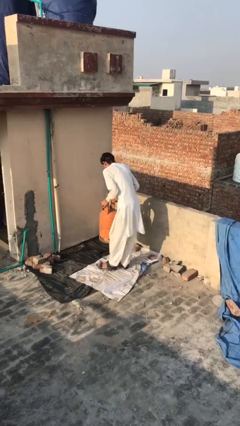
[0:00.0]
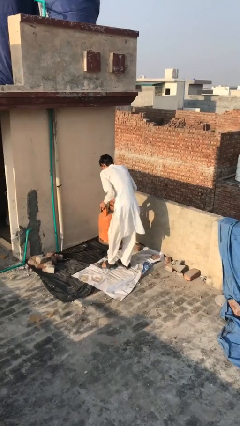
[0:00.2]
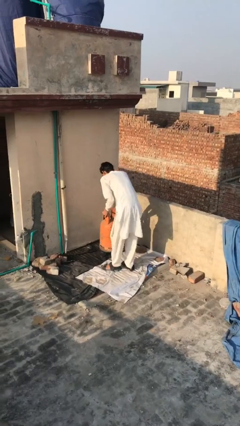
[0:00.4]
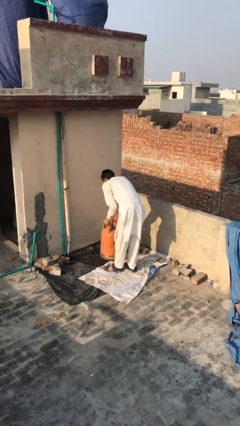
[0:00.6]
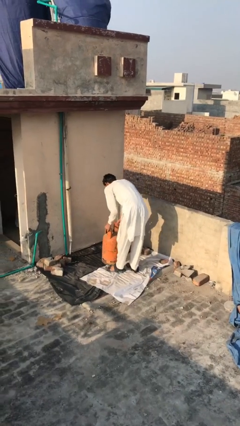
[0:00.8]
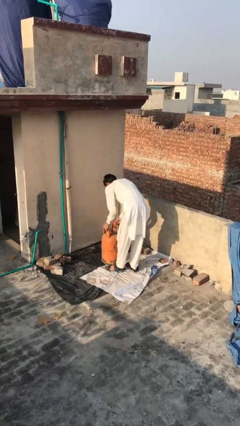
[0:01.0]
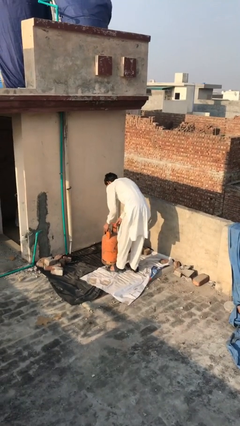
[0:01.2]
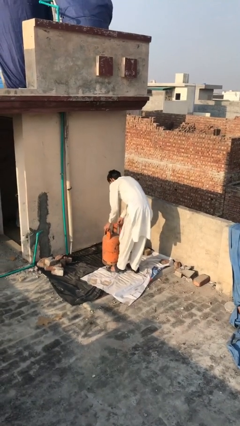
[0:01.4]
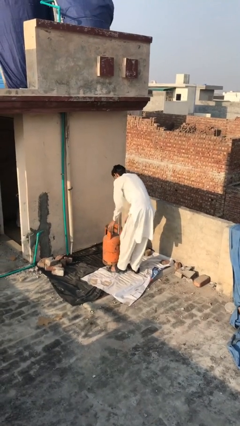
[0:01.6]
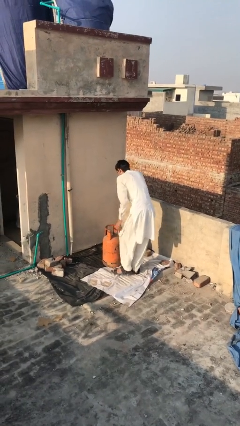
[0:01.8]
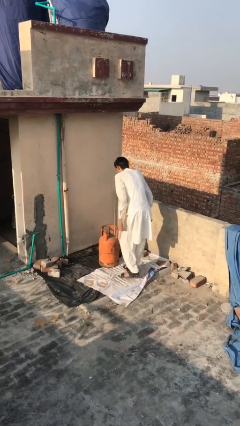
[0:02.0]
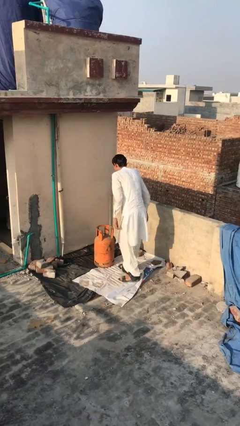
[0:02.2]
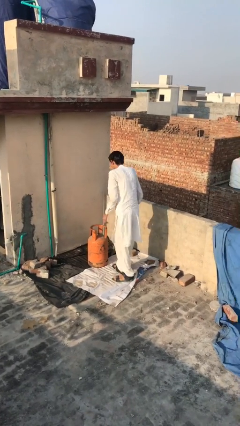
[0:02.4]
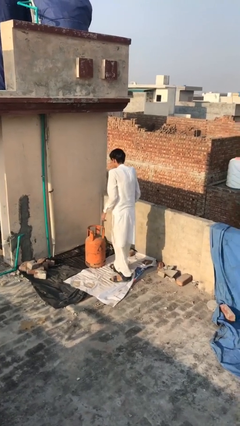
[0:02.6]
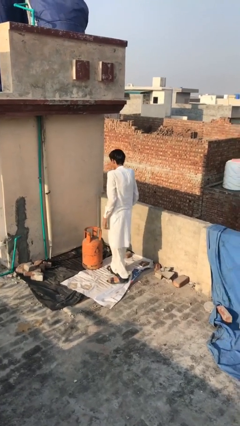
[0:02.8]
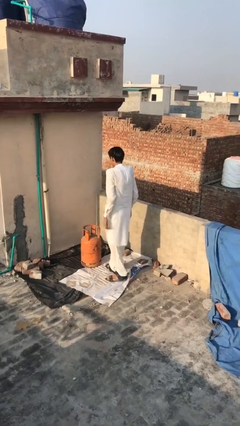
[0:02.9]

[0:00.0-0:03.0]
person puts down object on floor

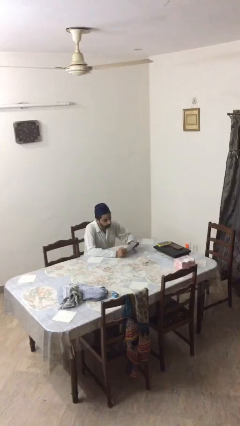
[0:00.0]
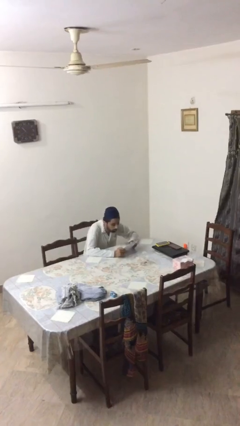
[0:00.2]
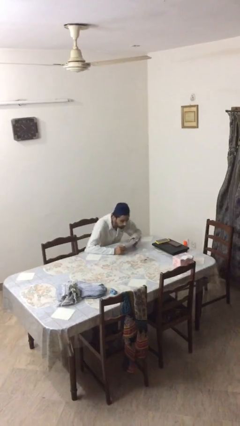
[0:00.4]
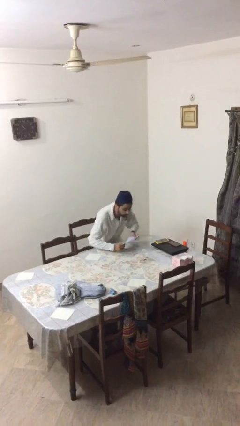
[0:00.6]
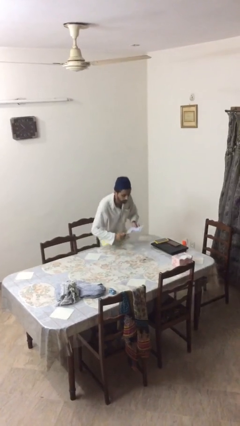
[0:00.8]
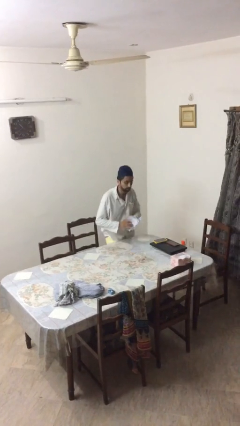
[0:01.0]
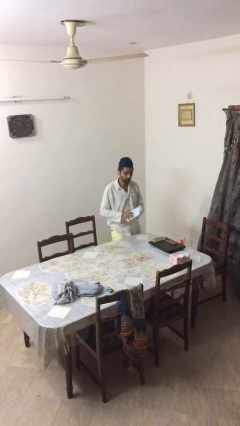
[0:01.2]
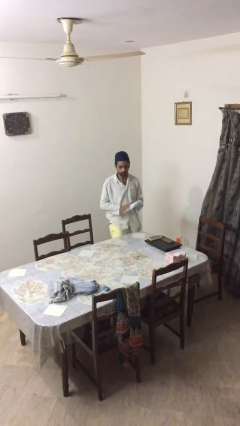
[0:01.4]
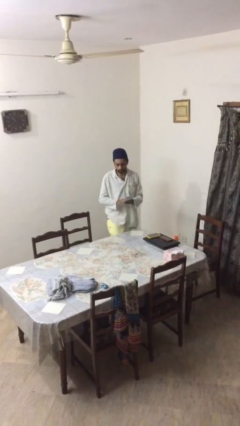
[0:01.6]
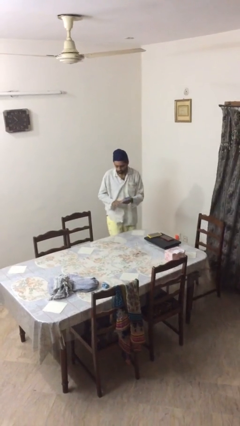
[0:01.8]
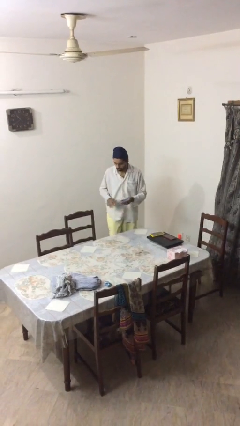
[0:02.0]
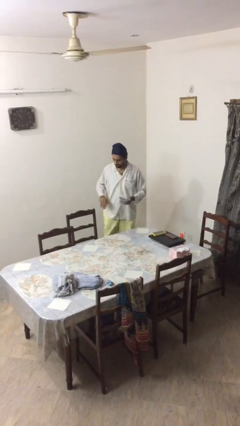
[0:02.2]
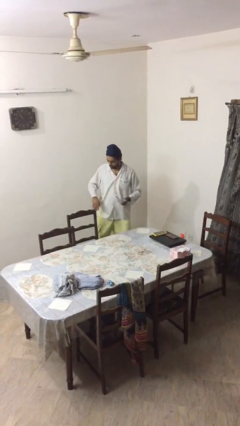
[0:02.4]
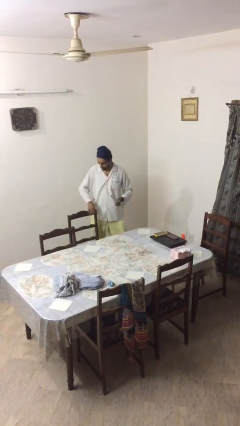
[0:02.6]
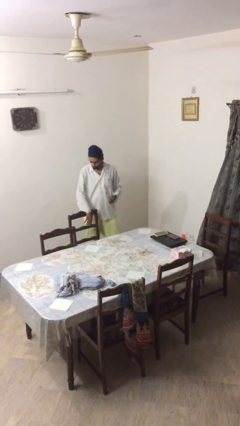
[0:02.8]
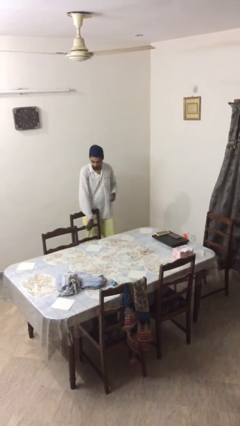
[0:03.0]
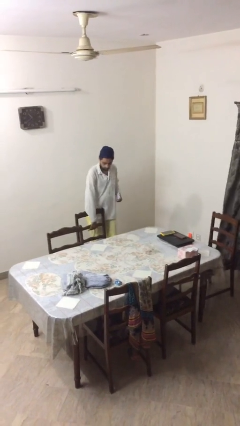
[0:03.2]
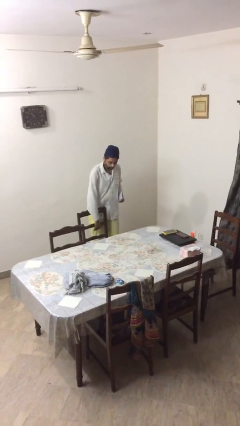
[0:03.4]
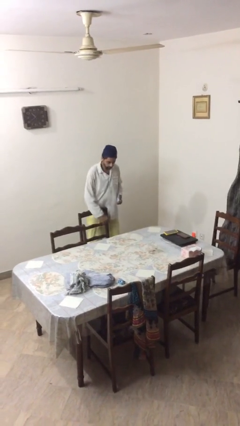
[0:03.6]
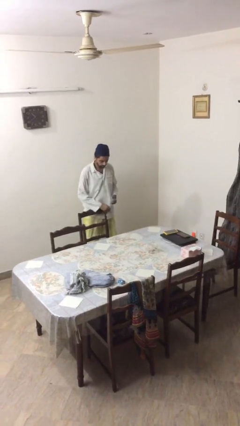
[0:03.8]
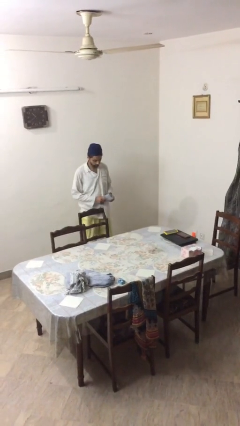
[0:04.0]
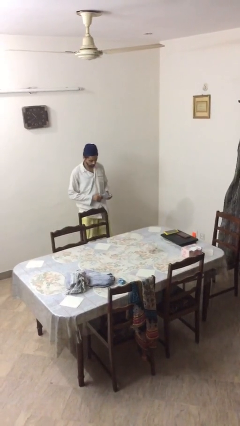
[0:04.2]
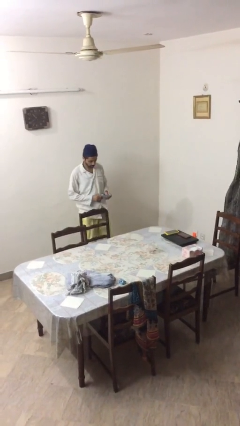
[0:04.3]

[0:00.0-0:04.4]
person stands up

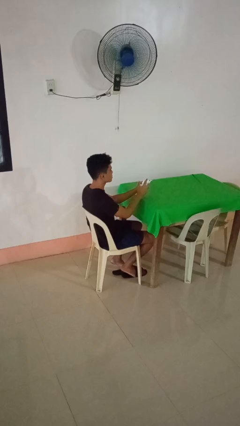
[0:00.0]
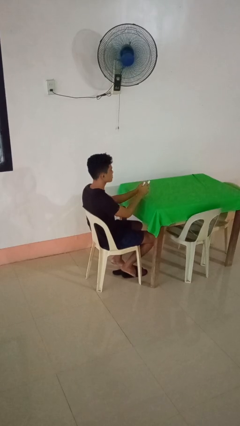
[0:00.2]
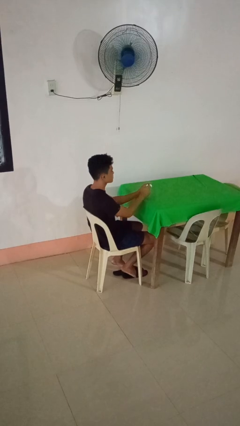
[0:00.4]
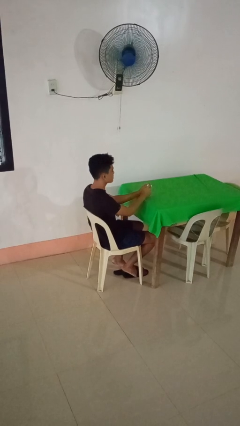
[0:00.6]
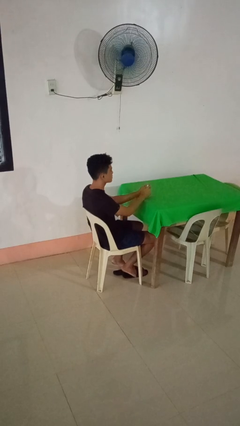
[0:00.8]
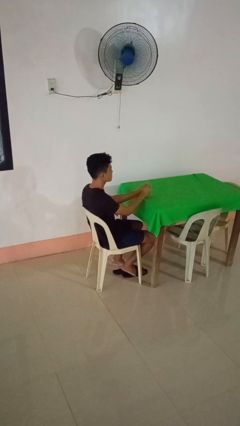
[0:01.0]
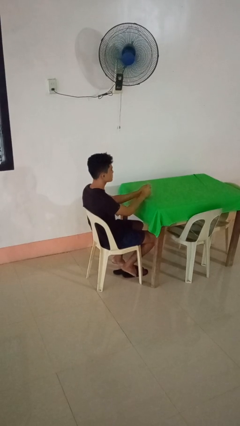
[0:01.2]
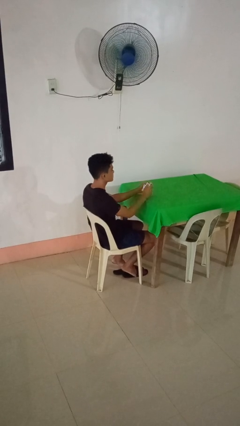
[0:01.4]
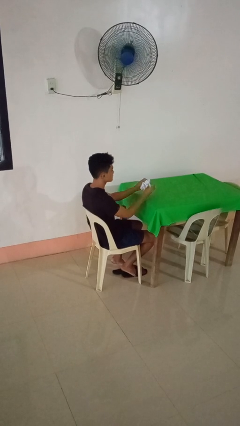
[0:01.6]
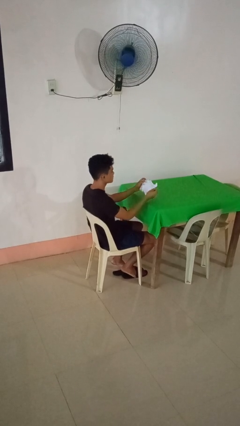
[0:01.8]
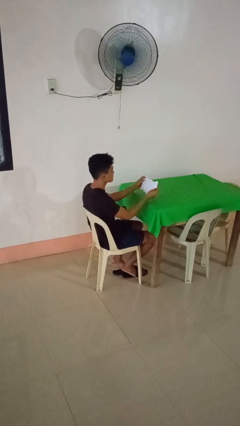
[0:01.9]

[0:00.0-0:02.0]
person crumples paper

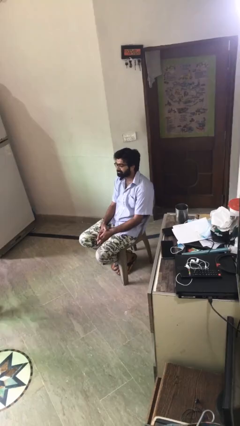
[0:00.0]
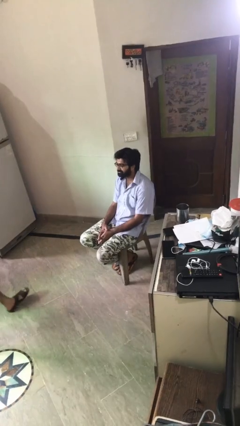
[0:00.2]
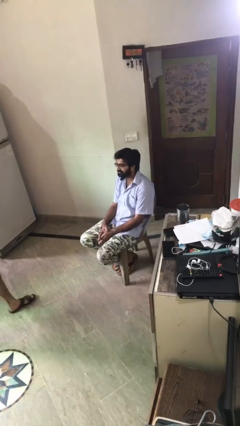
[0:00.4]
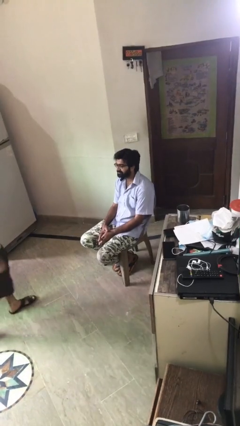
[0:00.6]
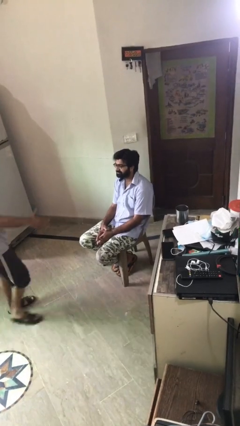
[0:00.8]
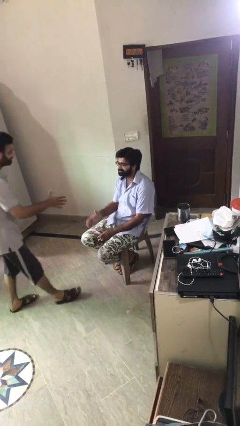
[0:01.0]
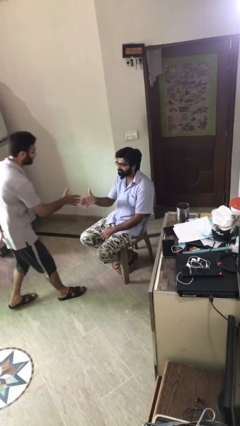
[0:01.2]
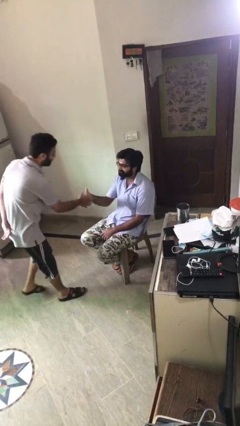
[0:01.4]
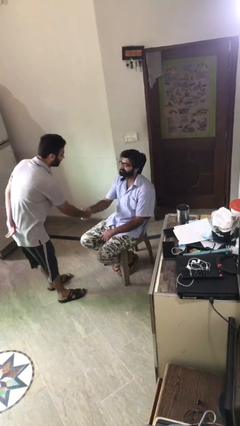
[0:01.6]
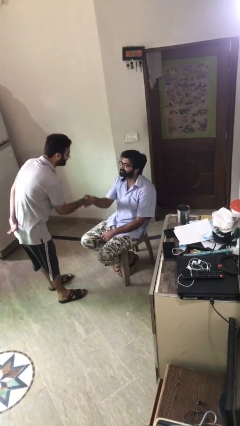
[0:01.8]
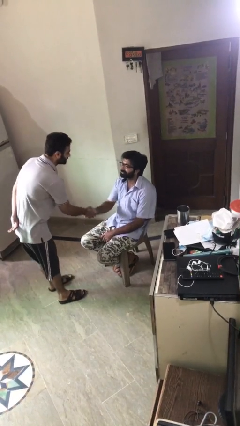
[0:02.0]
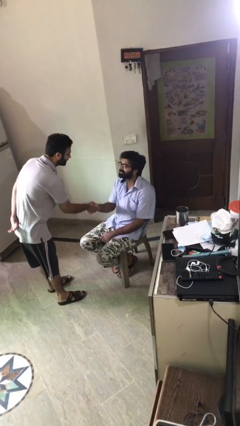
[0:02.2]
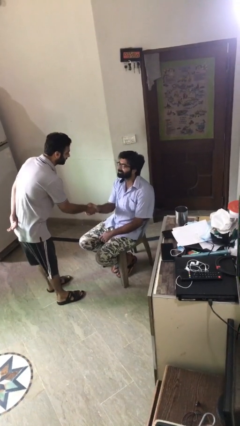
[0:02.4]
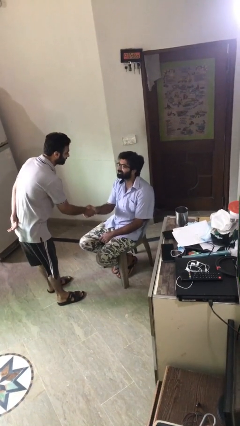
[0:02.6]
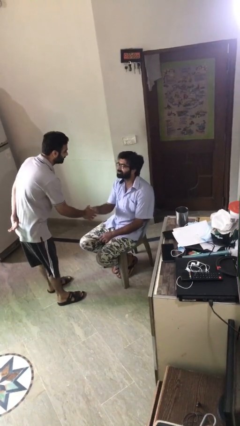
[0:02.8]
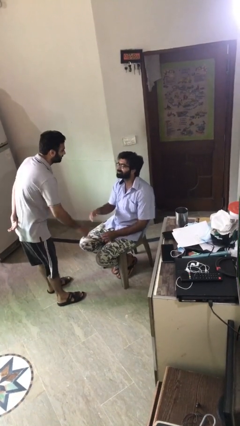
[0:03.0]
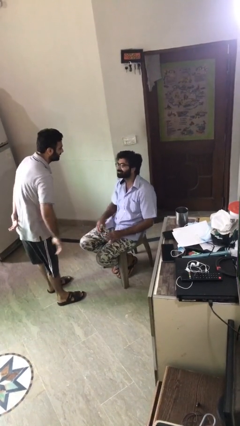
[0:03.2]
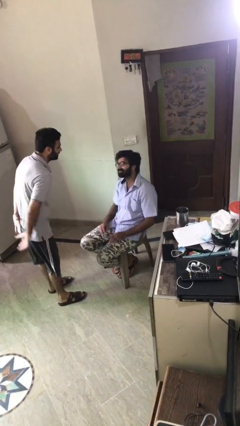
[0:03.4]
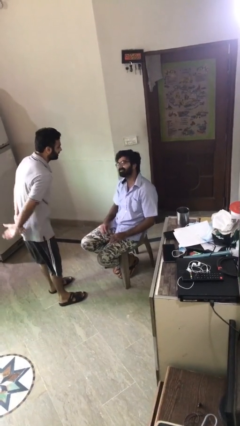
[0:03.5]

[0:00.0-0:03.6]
person shakes hand

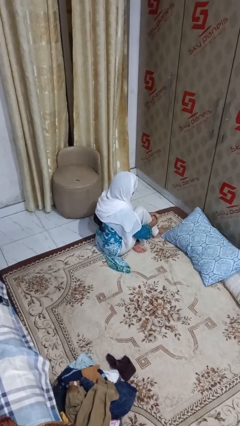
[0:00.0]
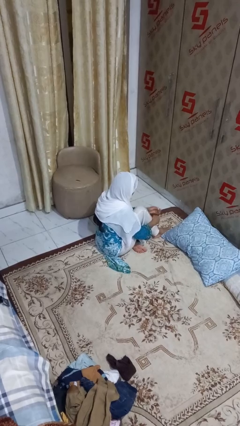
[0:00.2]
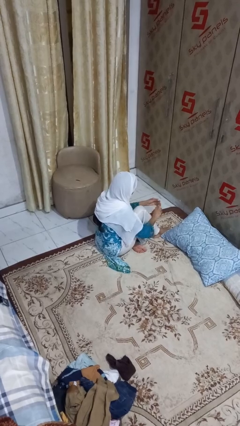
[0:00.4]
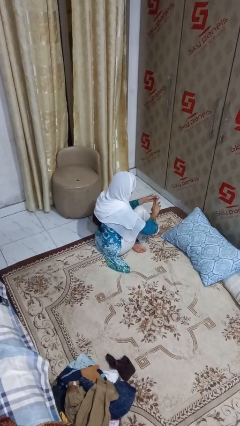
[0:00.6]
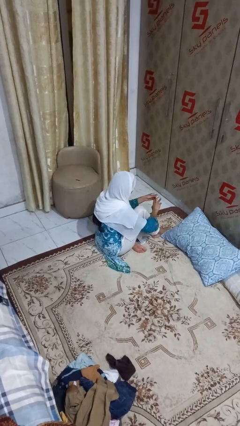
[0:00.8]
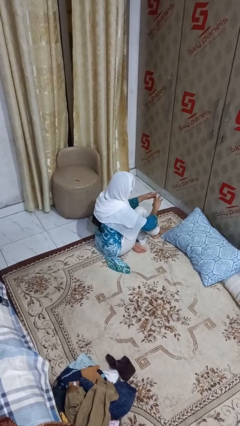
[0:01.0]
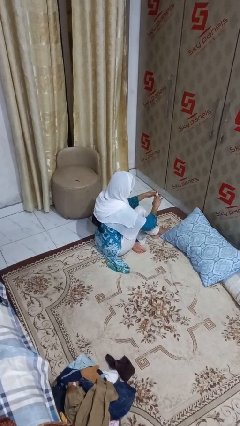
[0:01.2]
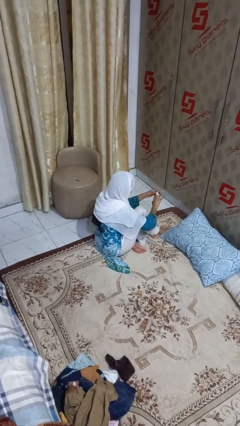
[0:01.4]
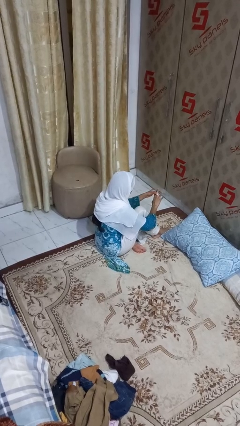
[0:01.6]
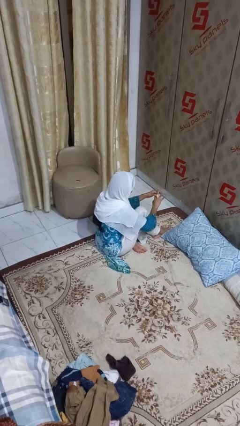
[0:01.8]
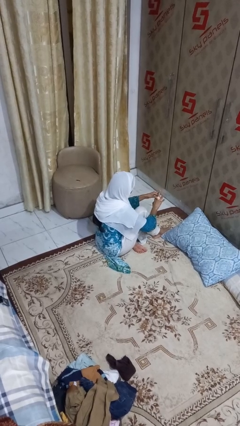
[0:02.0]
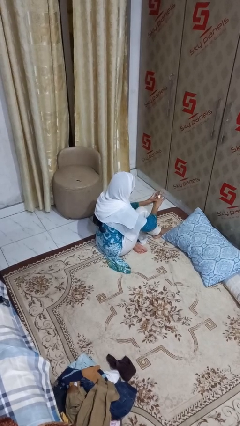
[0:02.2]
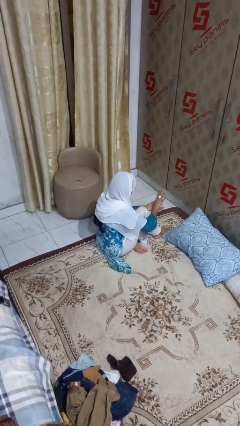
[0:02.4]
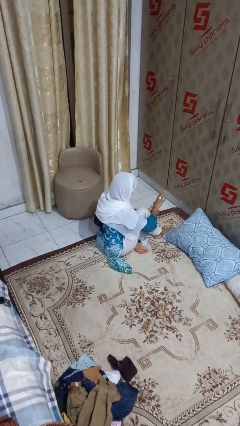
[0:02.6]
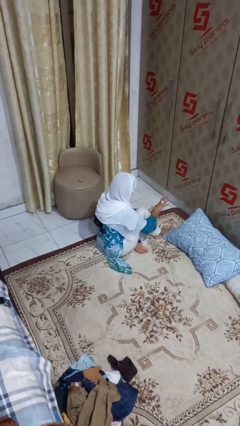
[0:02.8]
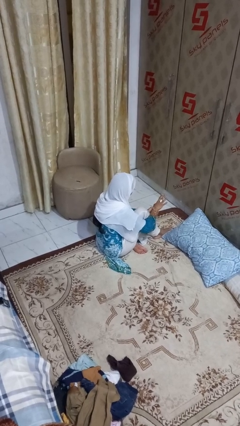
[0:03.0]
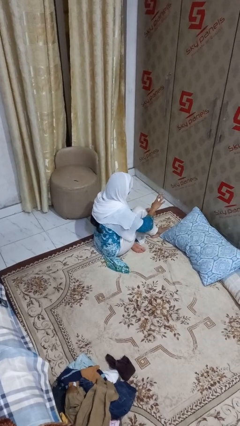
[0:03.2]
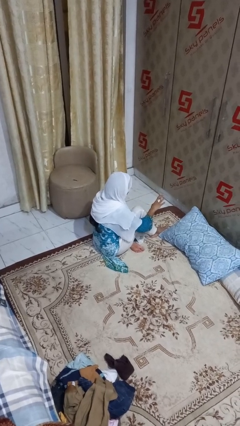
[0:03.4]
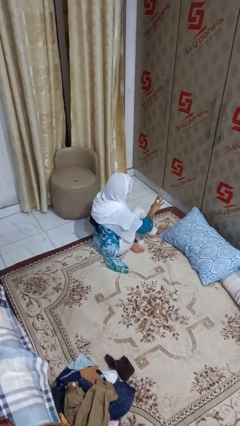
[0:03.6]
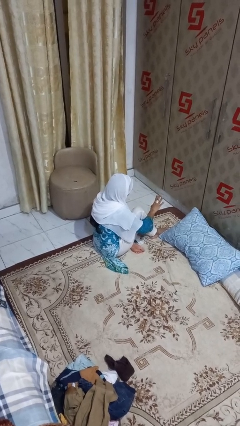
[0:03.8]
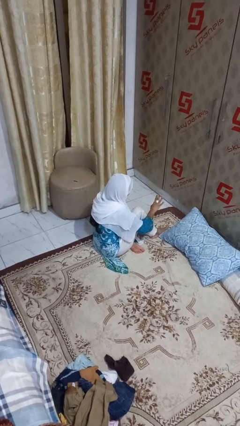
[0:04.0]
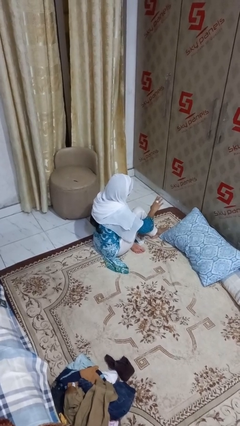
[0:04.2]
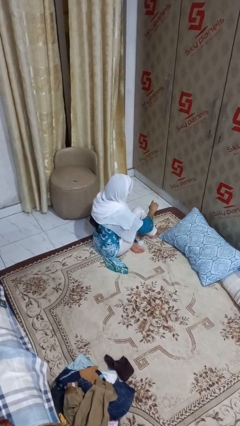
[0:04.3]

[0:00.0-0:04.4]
person puts on ring

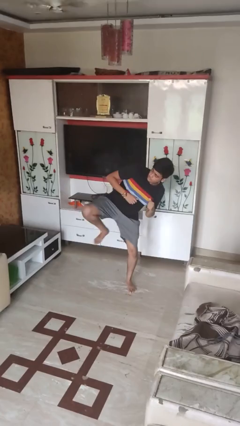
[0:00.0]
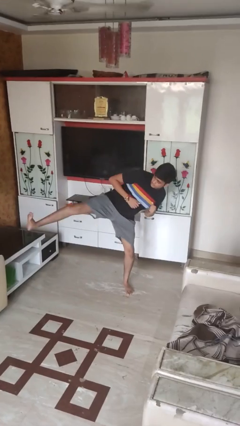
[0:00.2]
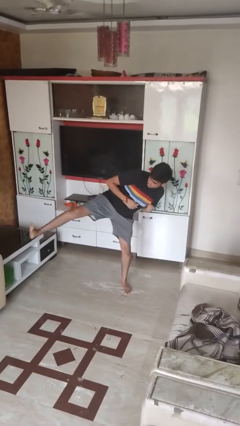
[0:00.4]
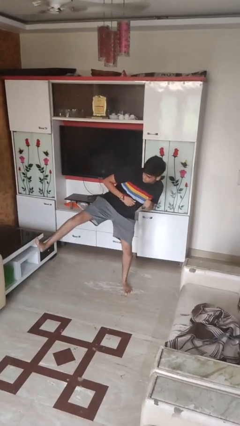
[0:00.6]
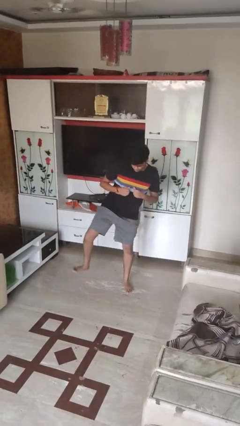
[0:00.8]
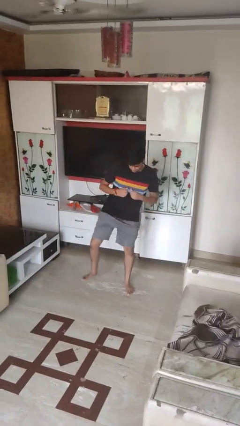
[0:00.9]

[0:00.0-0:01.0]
person karate kicks
